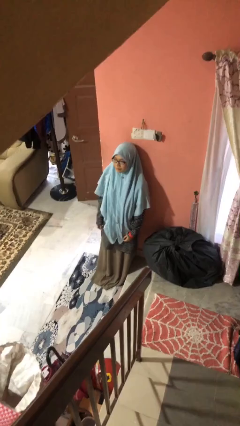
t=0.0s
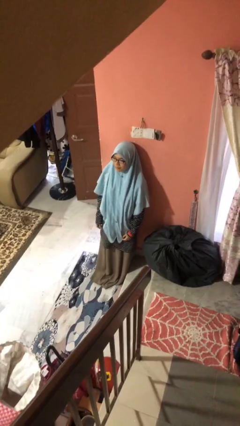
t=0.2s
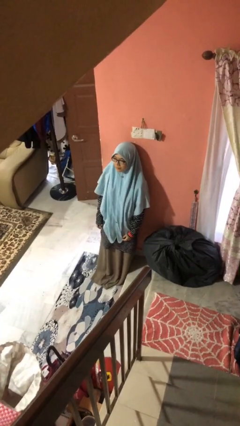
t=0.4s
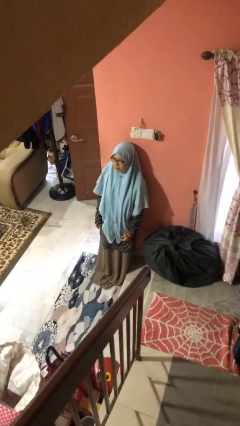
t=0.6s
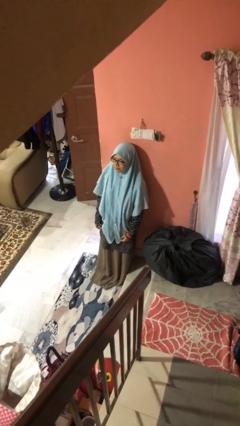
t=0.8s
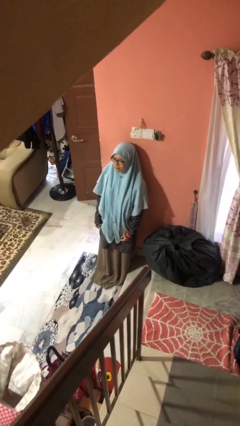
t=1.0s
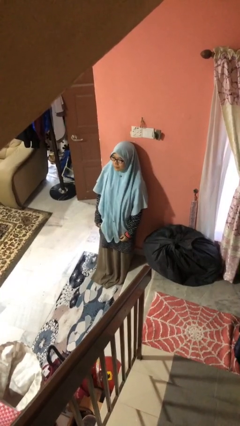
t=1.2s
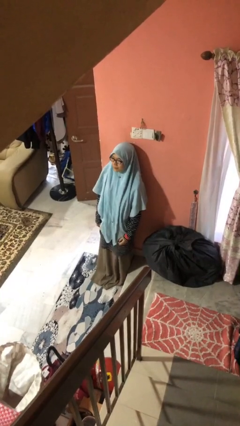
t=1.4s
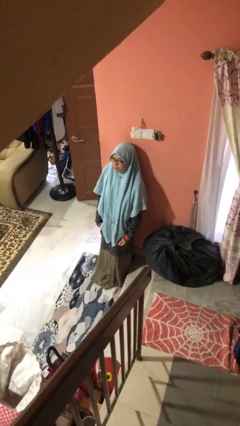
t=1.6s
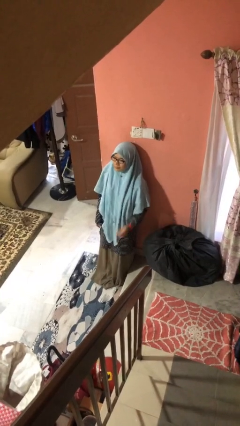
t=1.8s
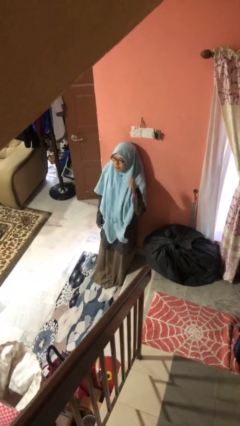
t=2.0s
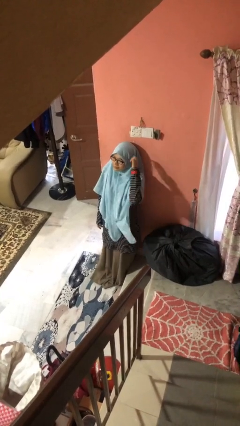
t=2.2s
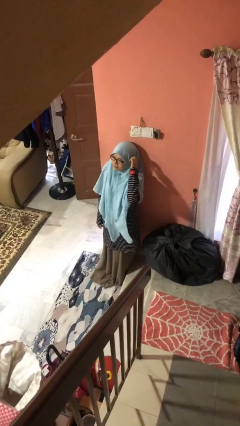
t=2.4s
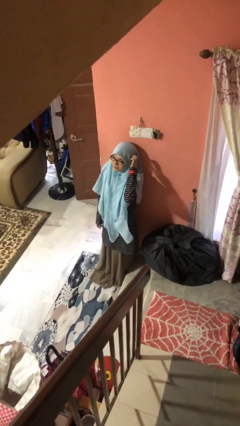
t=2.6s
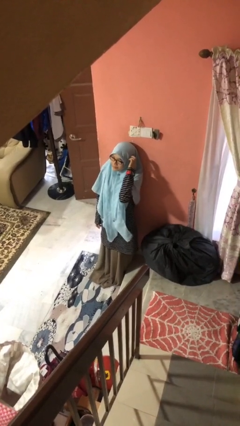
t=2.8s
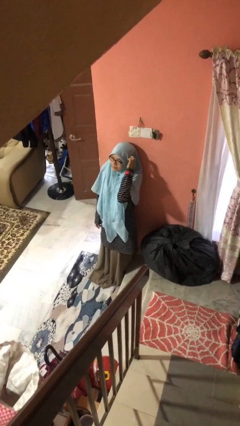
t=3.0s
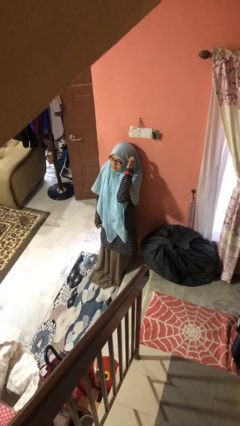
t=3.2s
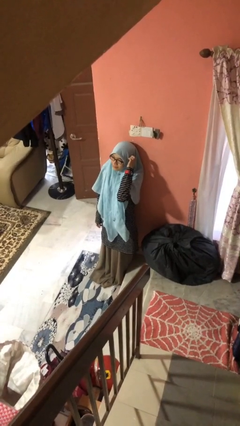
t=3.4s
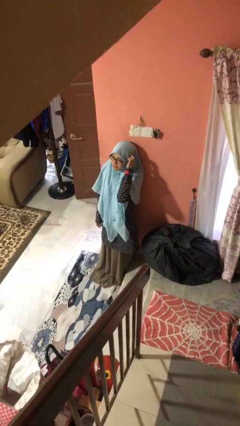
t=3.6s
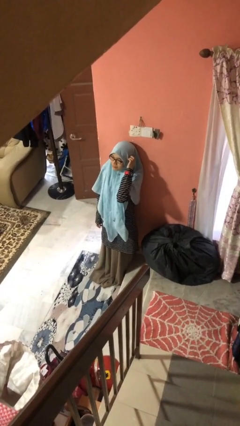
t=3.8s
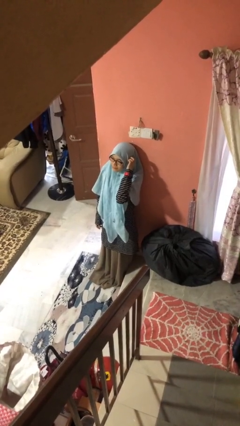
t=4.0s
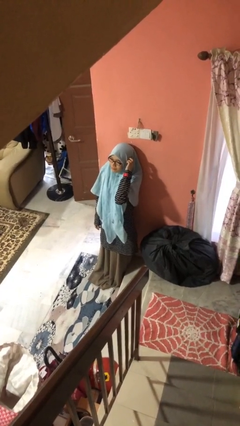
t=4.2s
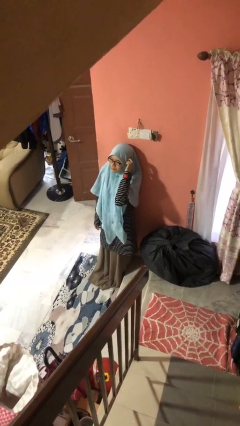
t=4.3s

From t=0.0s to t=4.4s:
person scratches face

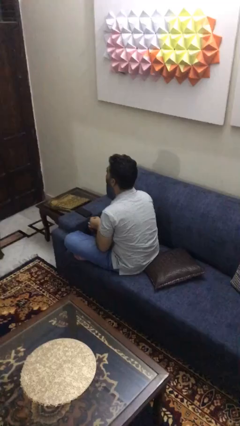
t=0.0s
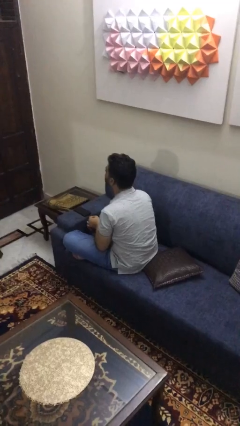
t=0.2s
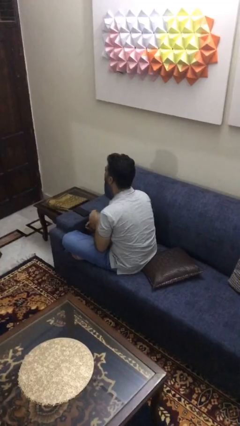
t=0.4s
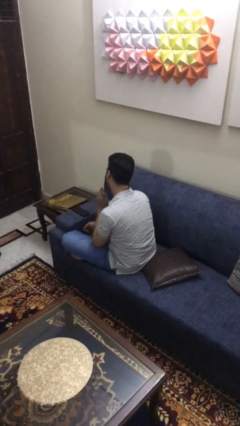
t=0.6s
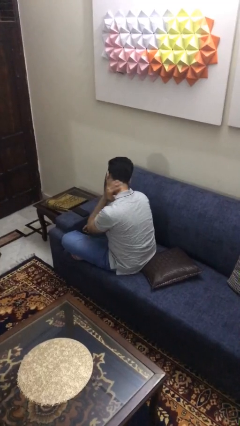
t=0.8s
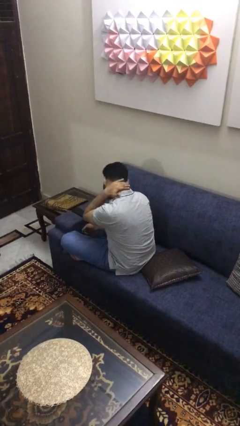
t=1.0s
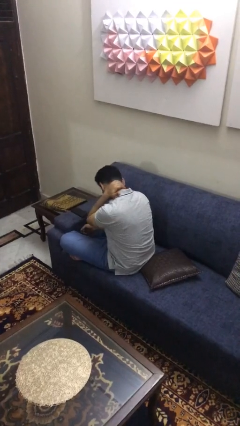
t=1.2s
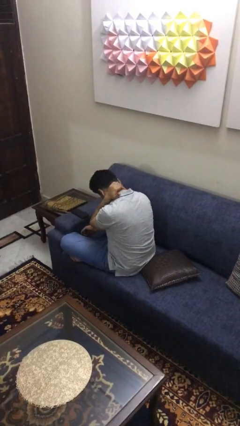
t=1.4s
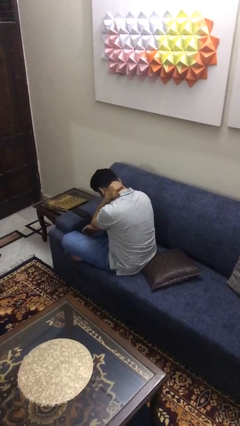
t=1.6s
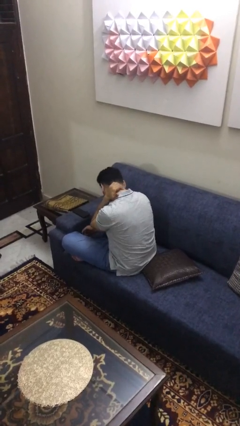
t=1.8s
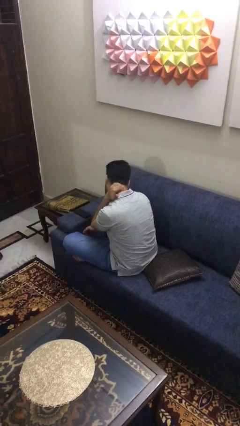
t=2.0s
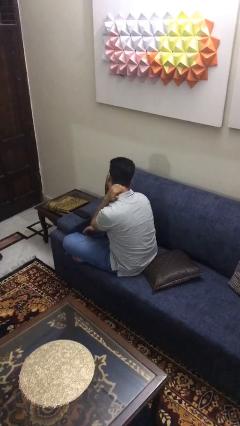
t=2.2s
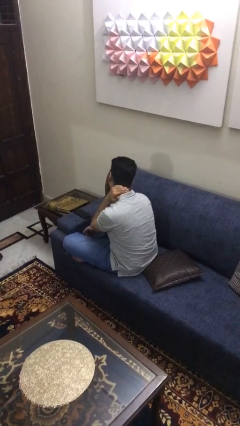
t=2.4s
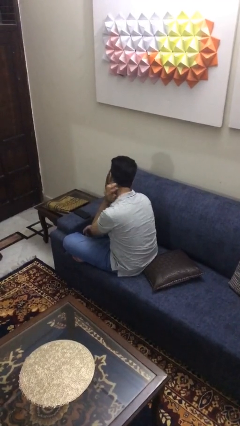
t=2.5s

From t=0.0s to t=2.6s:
person rubs neck

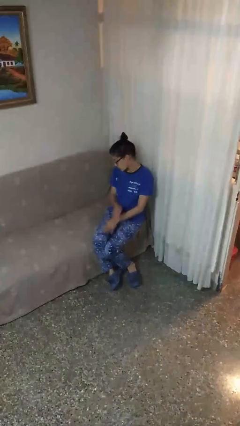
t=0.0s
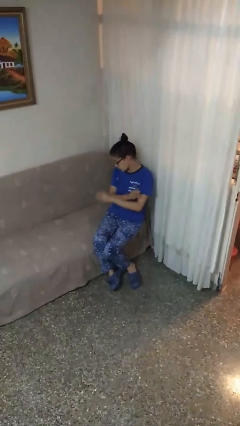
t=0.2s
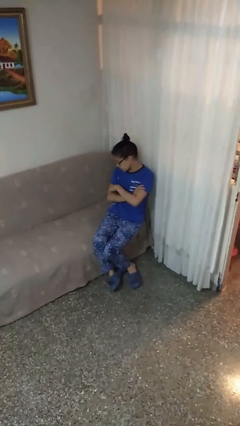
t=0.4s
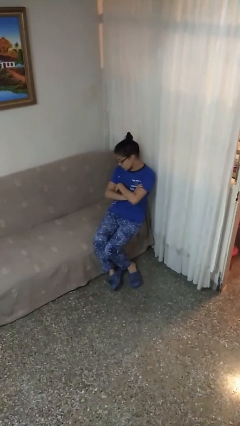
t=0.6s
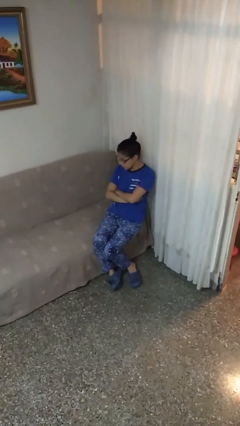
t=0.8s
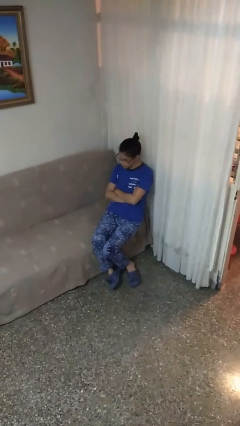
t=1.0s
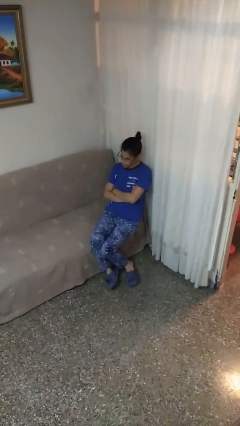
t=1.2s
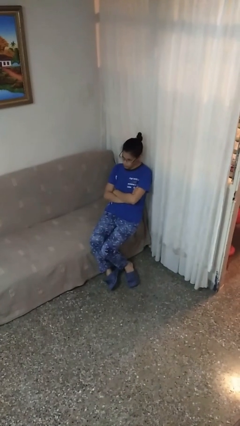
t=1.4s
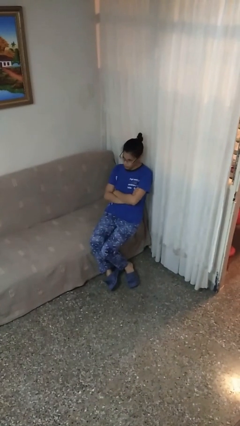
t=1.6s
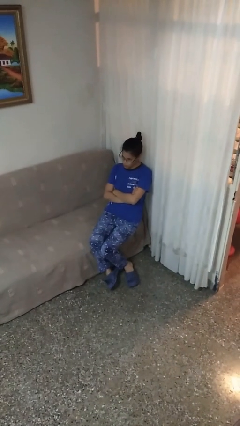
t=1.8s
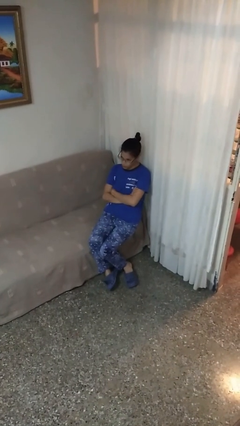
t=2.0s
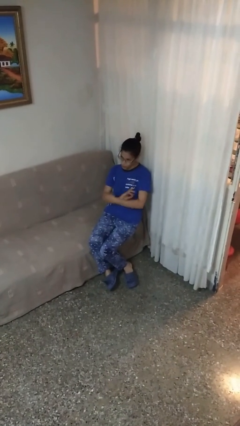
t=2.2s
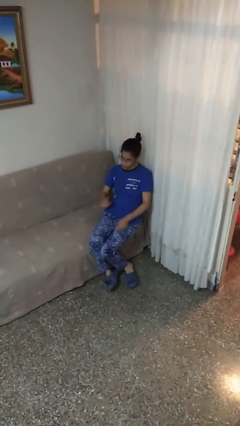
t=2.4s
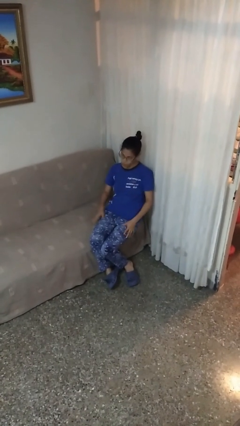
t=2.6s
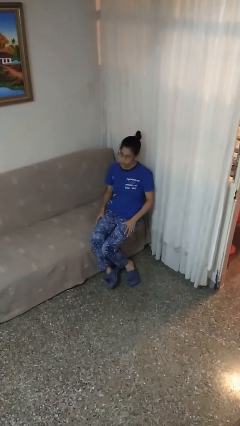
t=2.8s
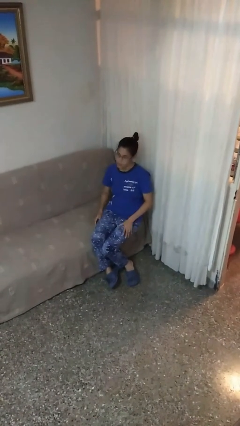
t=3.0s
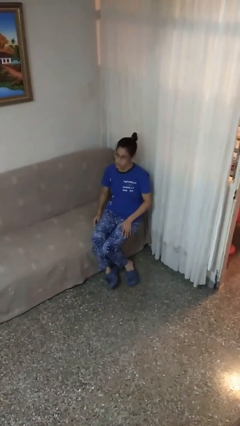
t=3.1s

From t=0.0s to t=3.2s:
person crosses arms

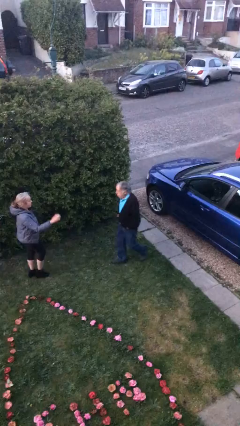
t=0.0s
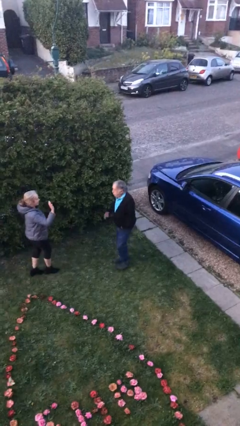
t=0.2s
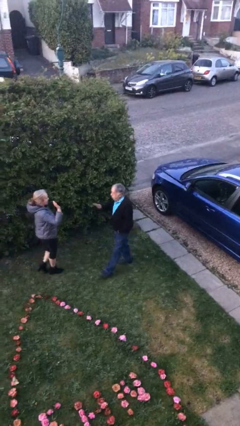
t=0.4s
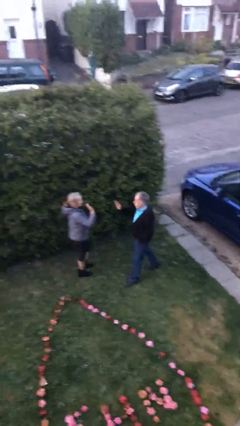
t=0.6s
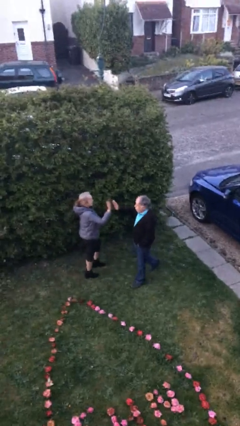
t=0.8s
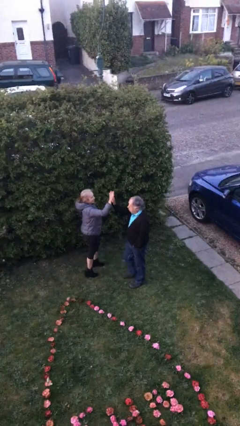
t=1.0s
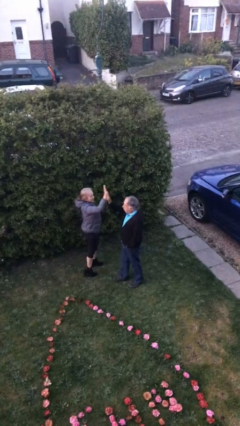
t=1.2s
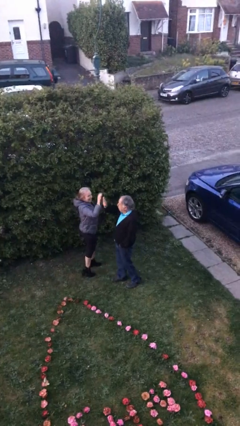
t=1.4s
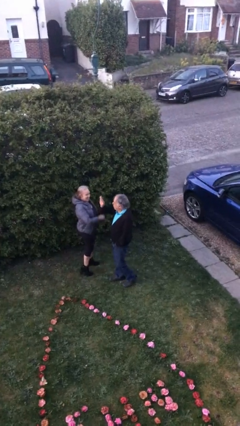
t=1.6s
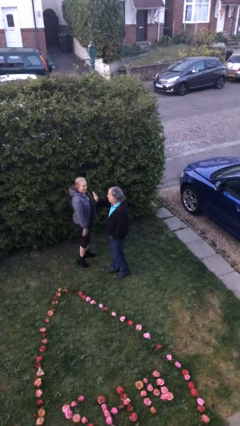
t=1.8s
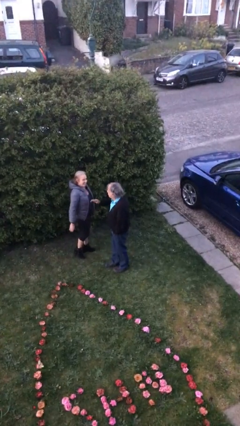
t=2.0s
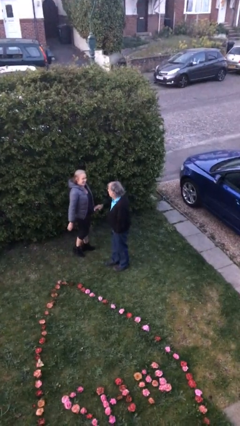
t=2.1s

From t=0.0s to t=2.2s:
person highfives hand

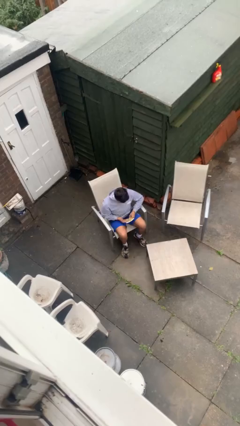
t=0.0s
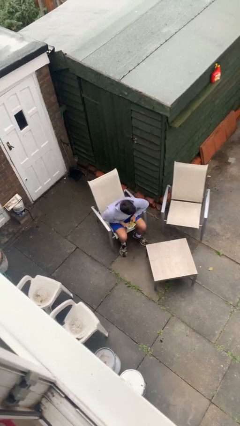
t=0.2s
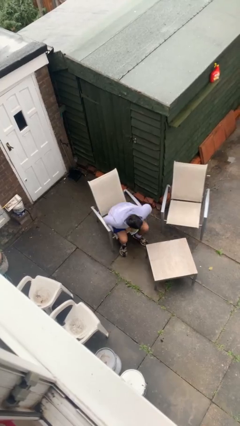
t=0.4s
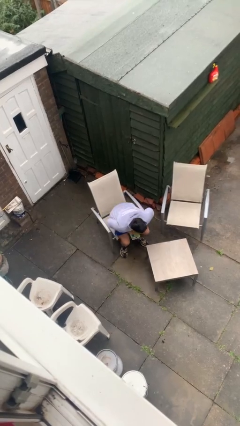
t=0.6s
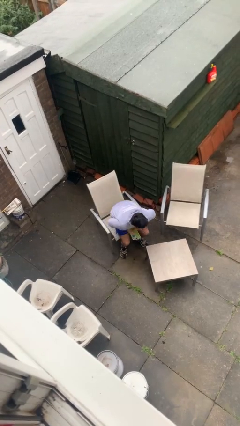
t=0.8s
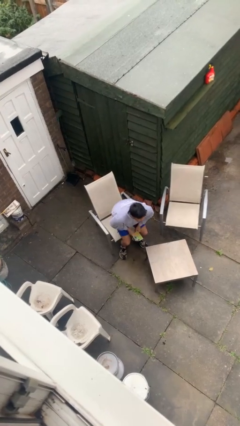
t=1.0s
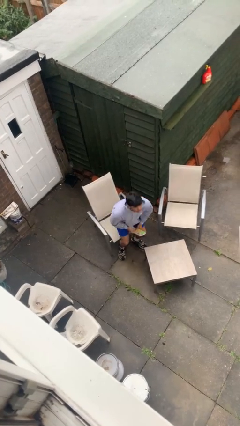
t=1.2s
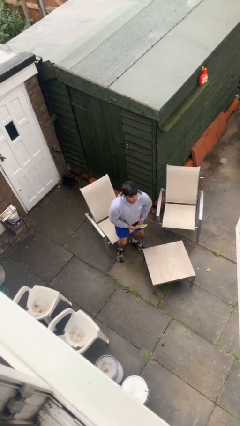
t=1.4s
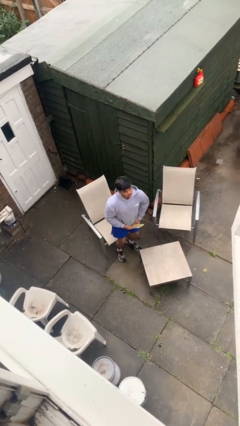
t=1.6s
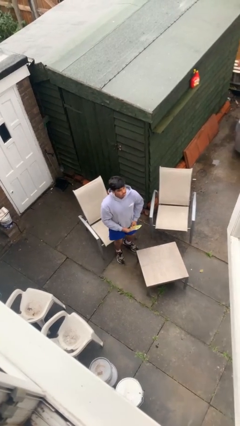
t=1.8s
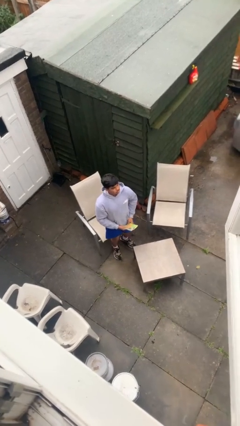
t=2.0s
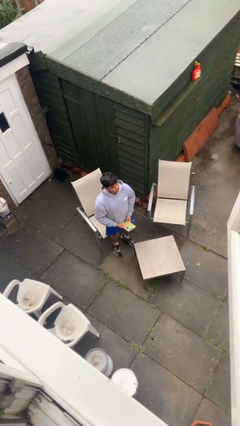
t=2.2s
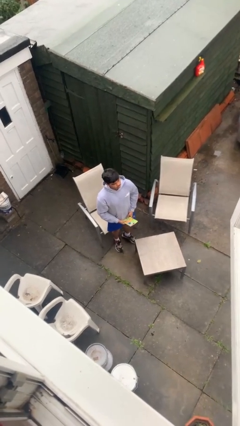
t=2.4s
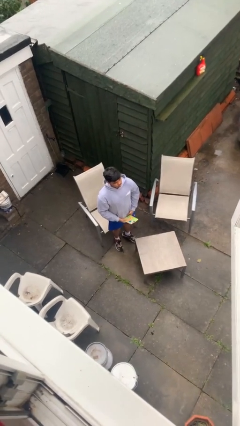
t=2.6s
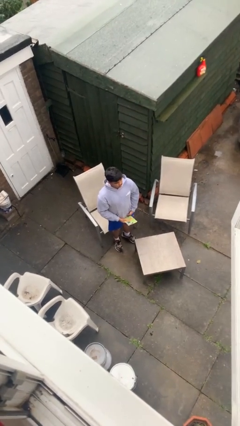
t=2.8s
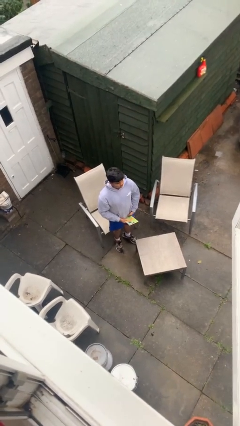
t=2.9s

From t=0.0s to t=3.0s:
person stands up

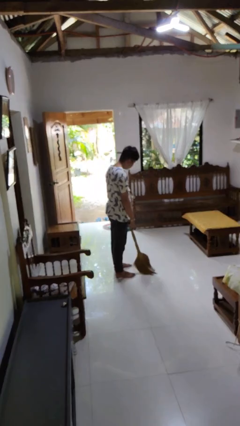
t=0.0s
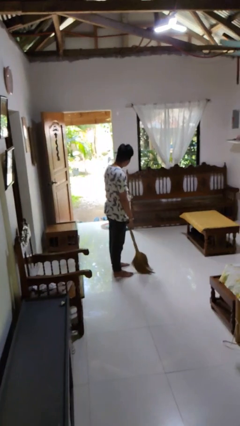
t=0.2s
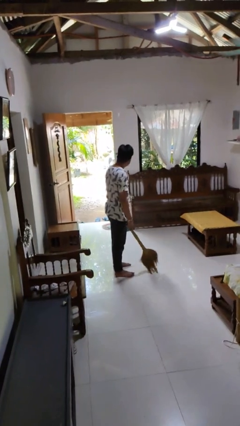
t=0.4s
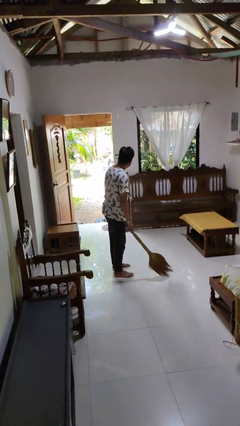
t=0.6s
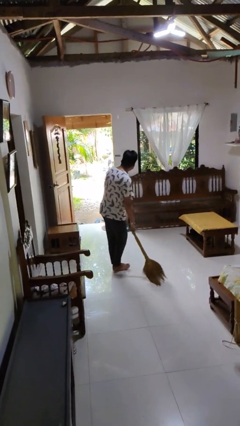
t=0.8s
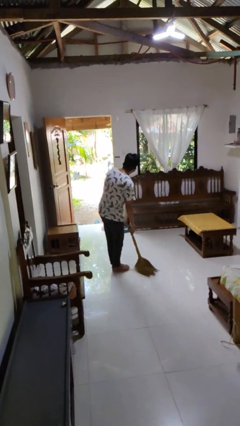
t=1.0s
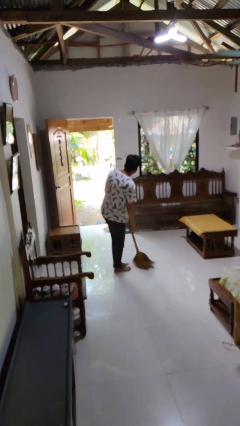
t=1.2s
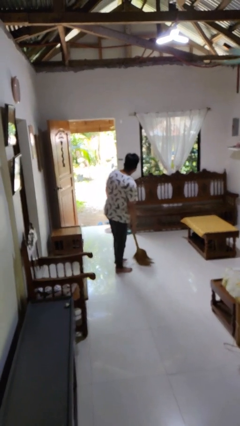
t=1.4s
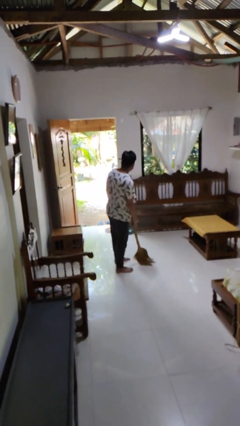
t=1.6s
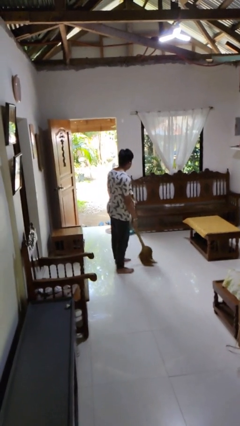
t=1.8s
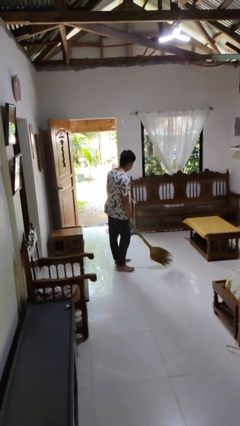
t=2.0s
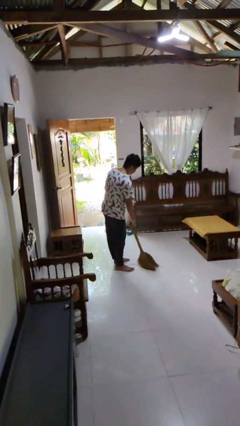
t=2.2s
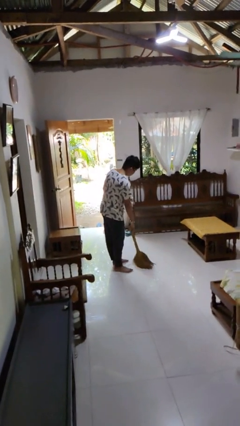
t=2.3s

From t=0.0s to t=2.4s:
person sweeps floor
